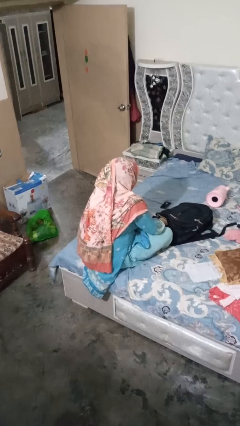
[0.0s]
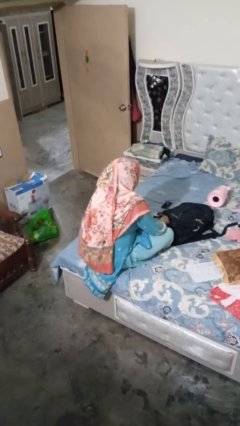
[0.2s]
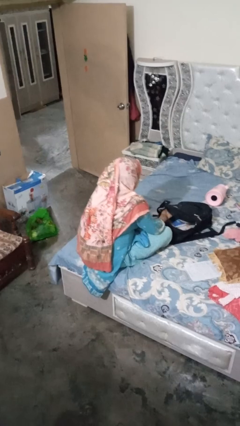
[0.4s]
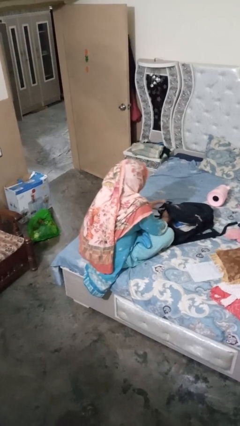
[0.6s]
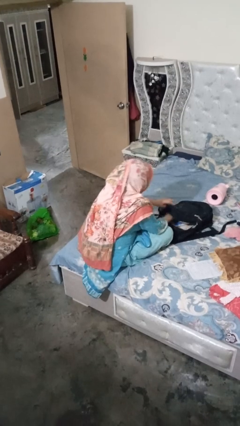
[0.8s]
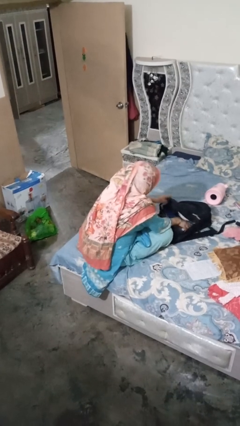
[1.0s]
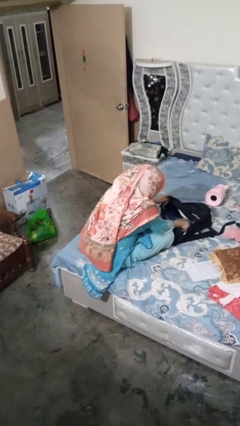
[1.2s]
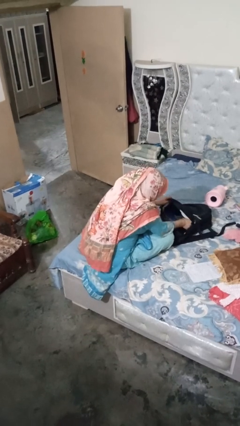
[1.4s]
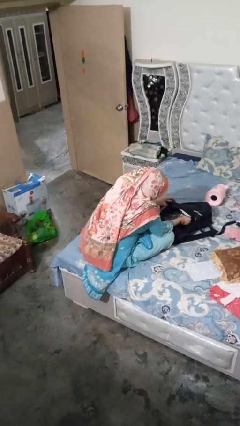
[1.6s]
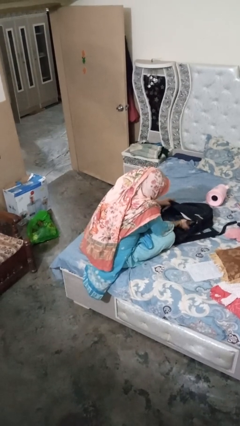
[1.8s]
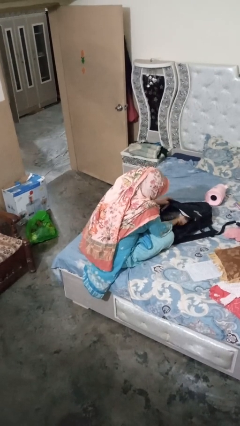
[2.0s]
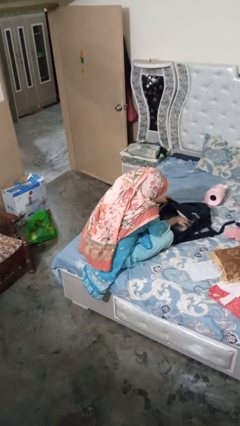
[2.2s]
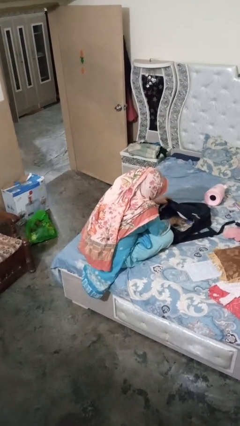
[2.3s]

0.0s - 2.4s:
person searches in bag

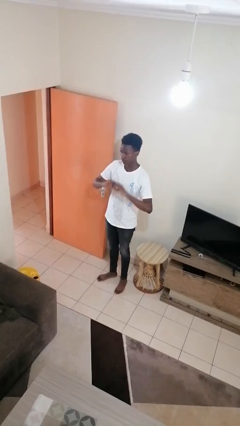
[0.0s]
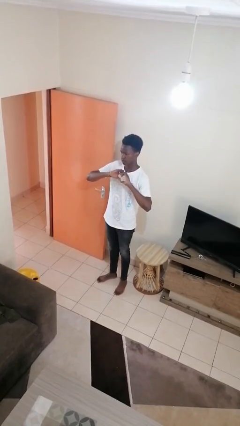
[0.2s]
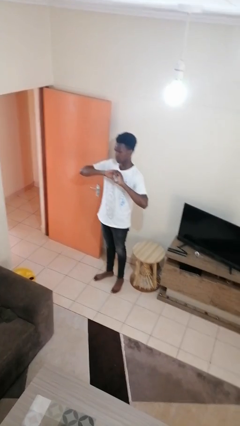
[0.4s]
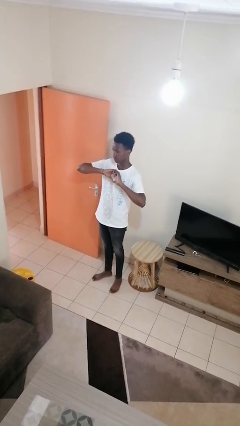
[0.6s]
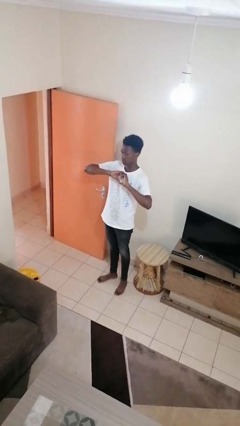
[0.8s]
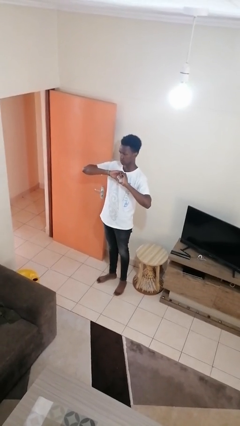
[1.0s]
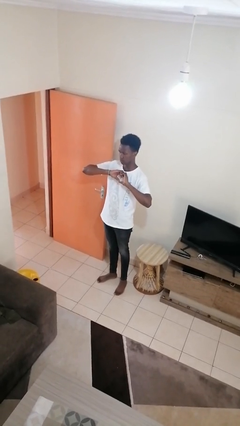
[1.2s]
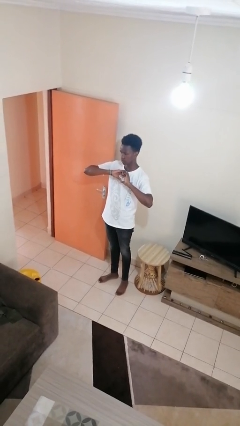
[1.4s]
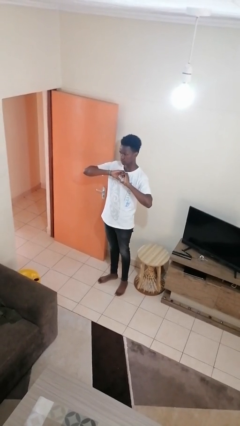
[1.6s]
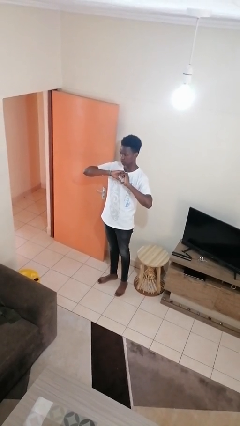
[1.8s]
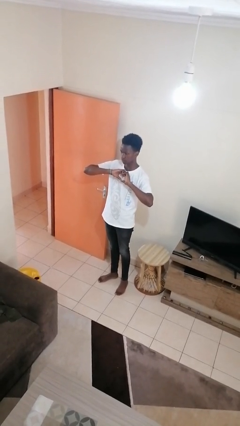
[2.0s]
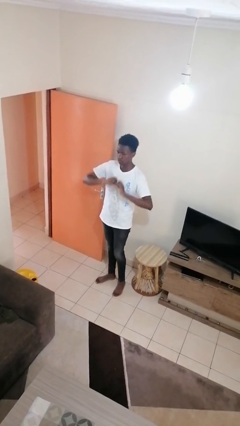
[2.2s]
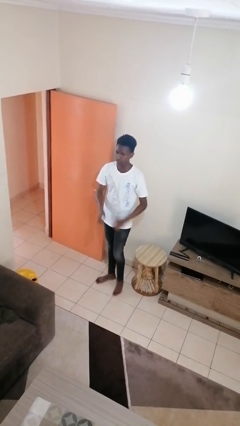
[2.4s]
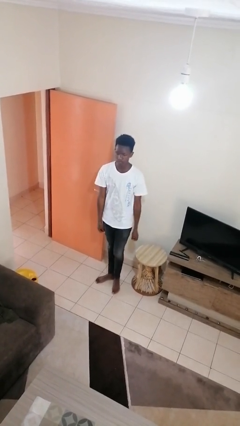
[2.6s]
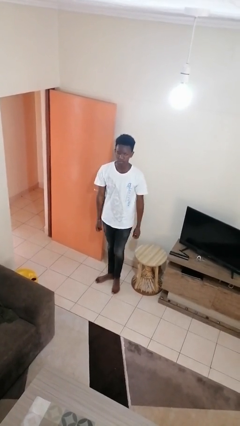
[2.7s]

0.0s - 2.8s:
person gestures heart

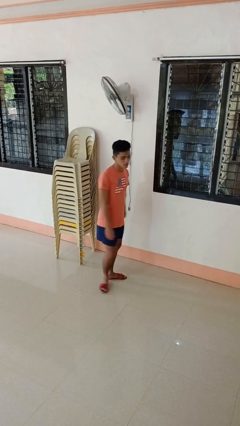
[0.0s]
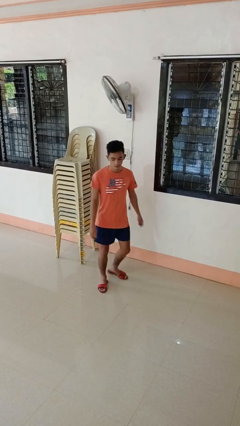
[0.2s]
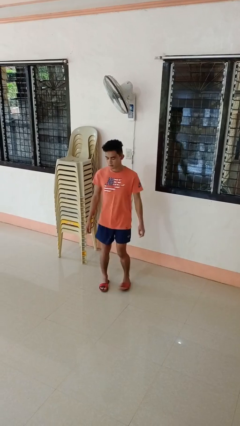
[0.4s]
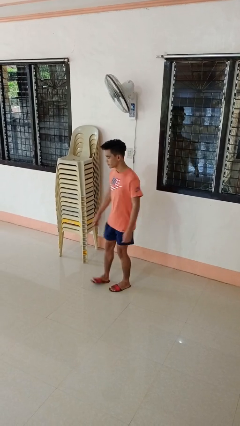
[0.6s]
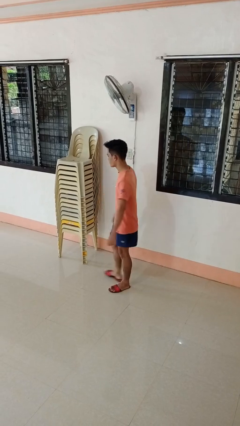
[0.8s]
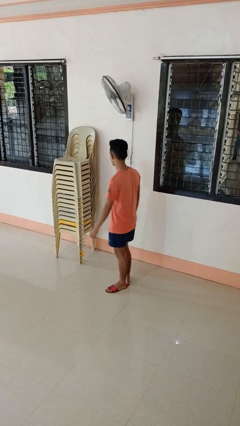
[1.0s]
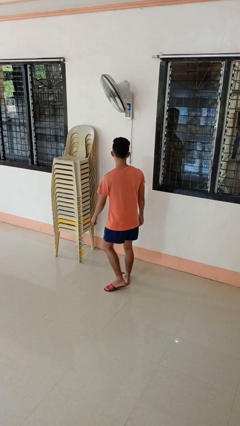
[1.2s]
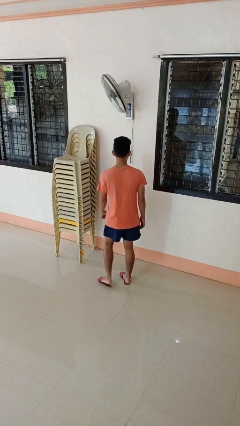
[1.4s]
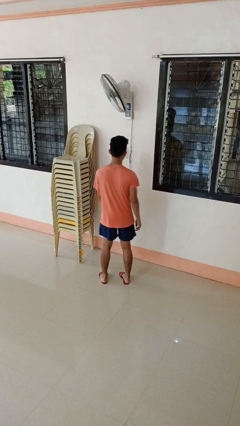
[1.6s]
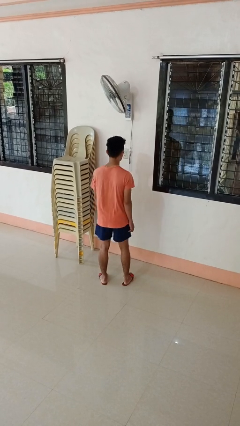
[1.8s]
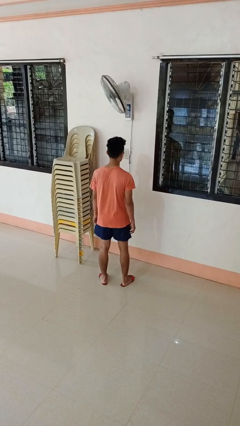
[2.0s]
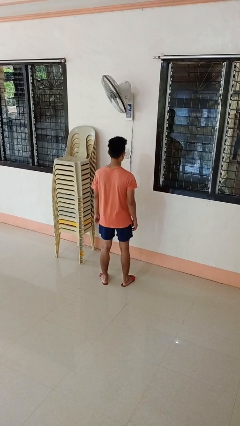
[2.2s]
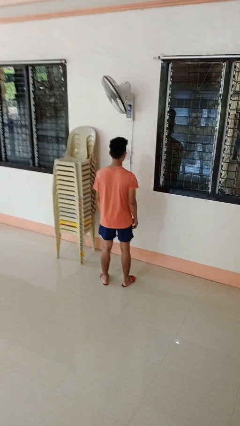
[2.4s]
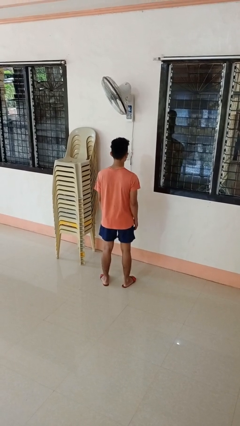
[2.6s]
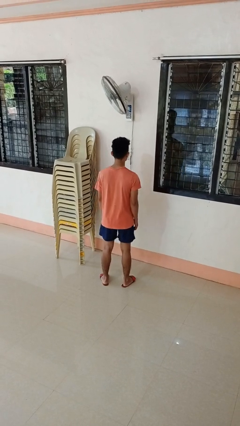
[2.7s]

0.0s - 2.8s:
person twirls

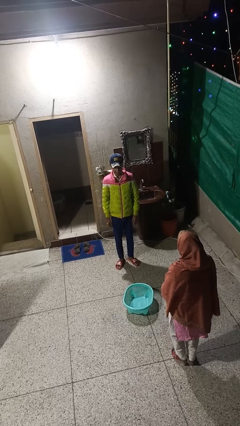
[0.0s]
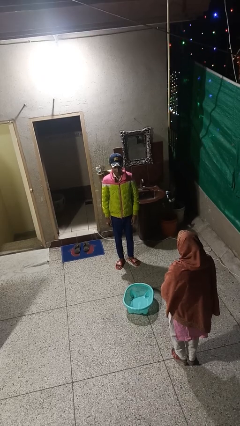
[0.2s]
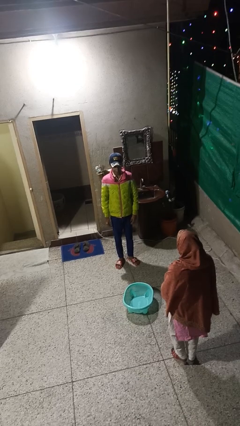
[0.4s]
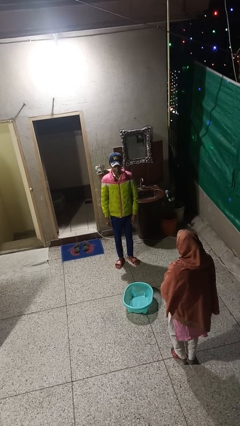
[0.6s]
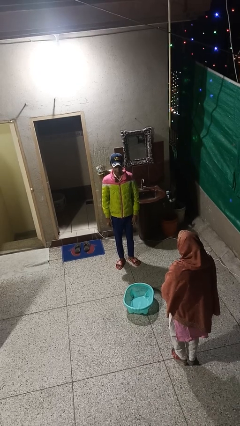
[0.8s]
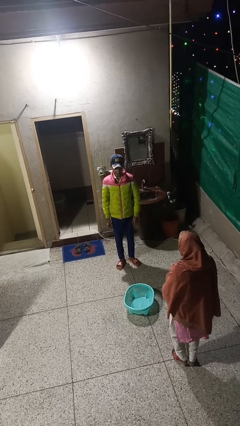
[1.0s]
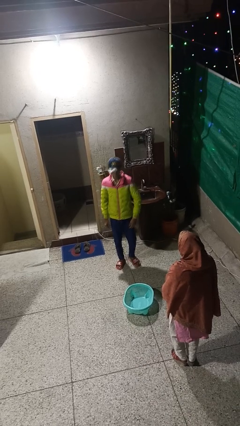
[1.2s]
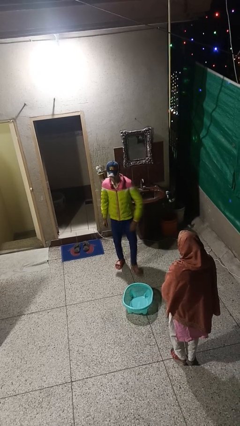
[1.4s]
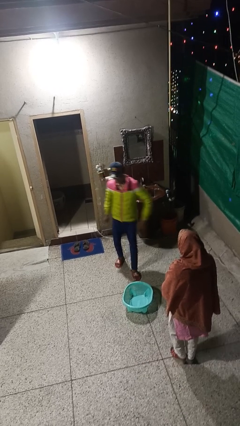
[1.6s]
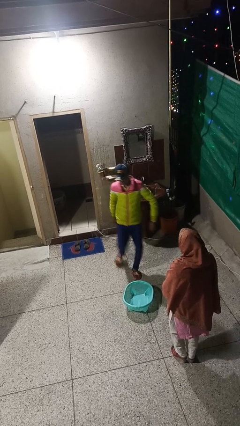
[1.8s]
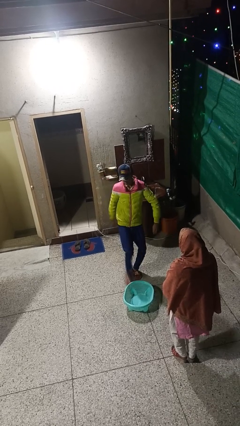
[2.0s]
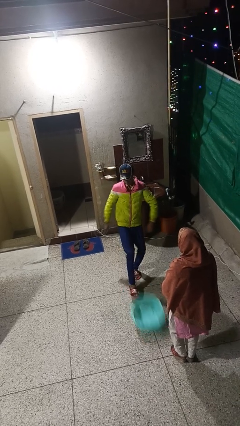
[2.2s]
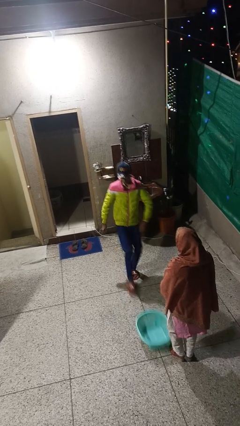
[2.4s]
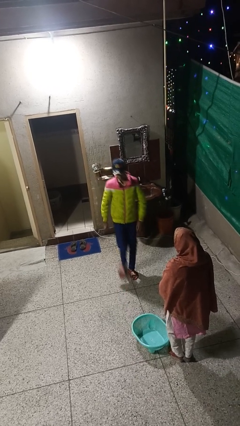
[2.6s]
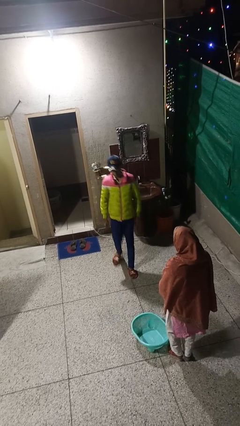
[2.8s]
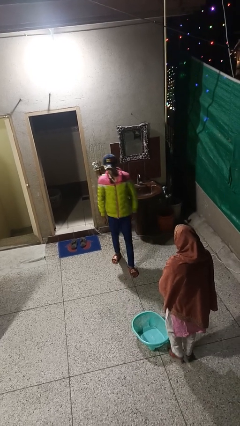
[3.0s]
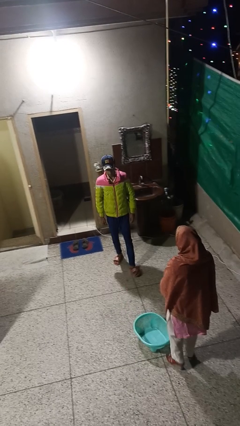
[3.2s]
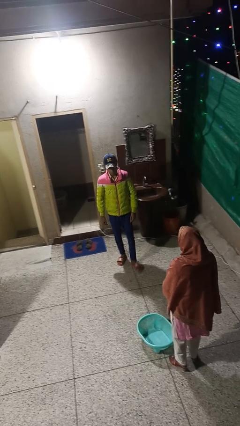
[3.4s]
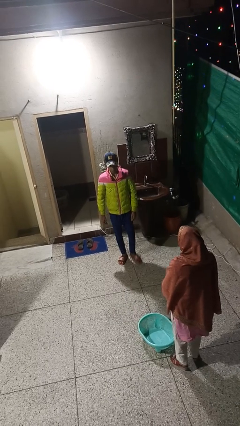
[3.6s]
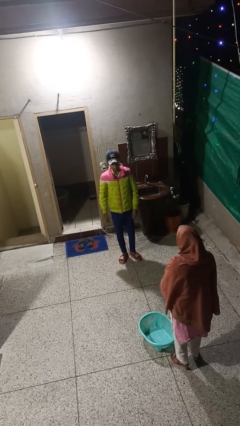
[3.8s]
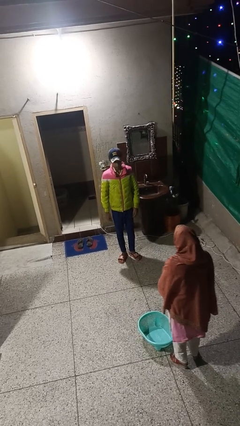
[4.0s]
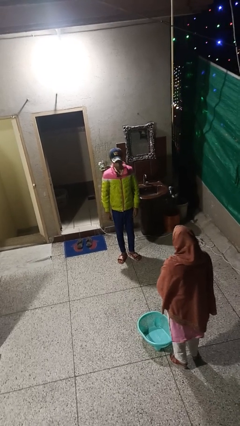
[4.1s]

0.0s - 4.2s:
person kicks object to person

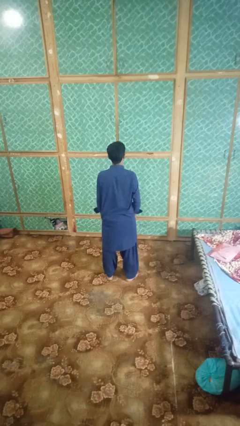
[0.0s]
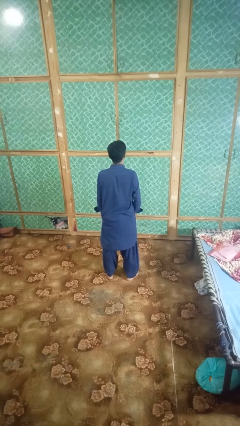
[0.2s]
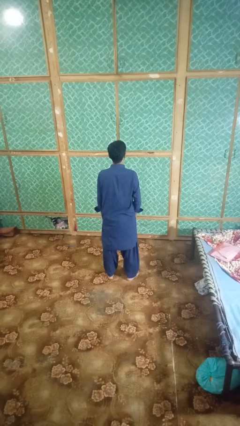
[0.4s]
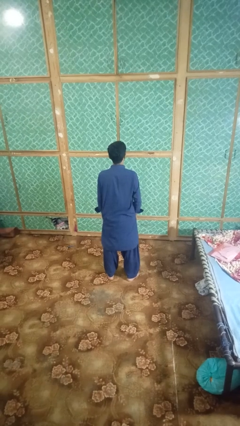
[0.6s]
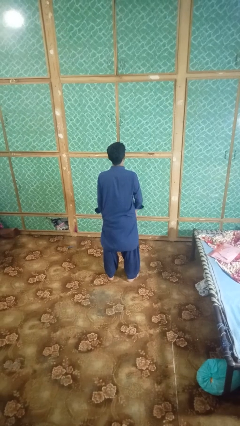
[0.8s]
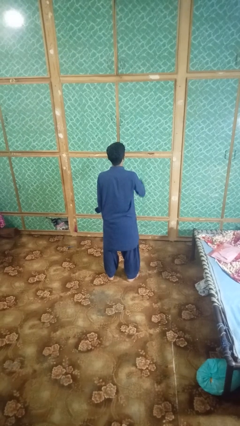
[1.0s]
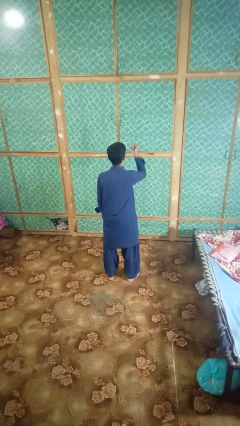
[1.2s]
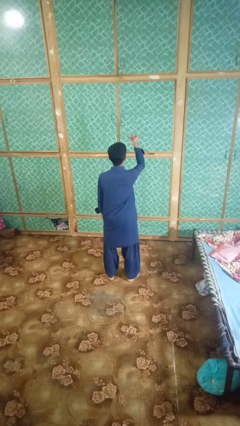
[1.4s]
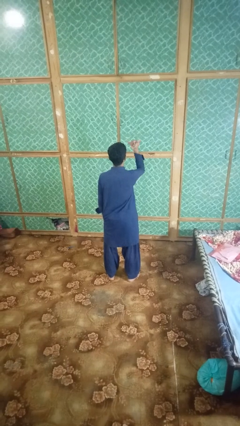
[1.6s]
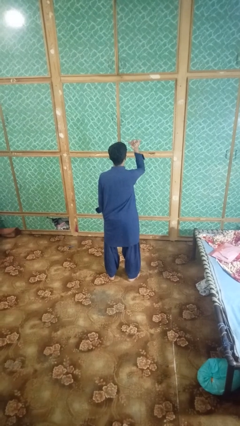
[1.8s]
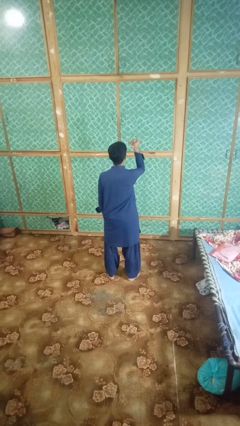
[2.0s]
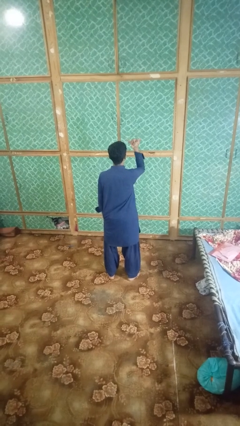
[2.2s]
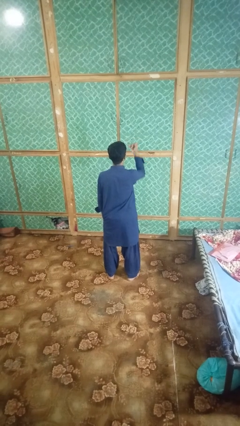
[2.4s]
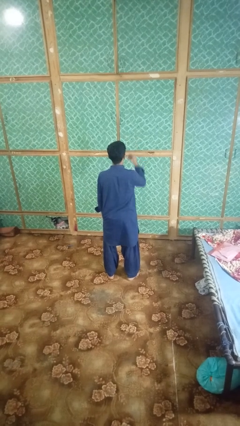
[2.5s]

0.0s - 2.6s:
person gestures hang loose

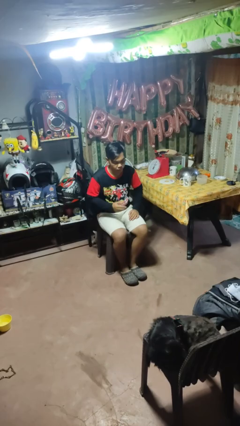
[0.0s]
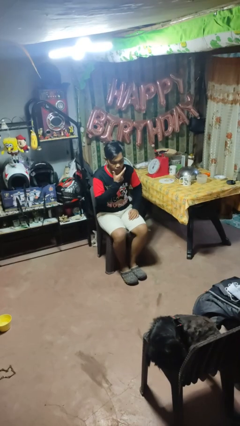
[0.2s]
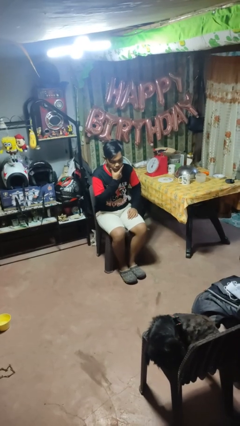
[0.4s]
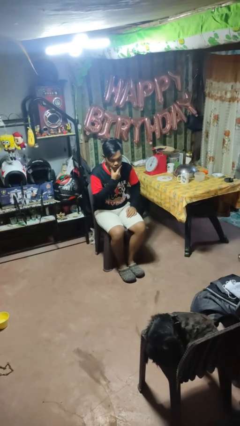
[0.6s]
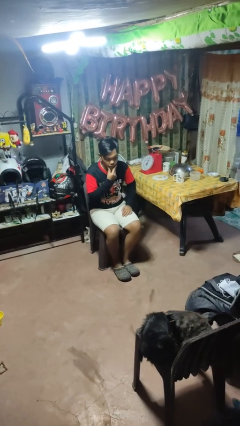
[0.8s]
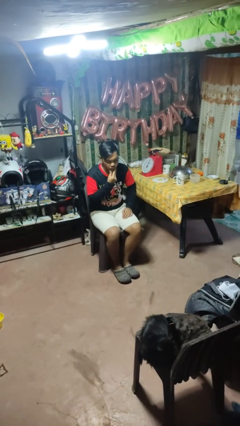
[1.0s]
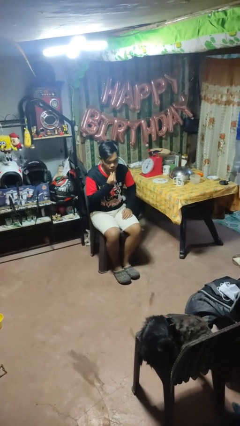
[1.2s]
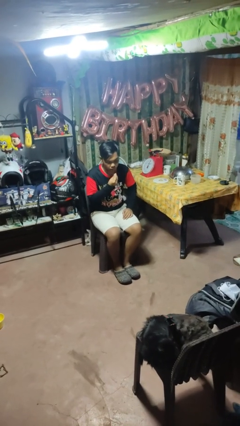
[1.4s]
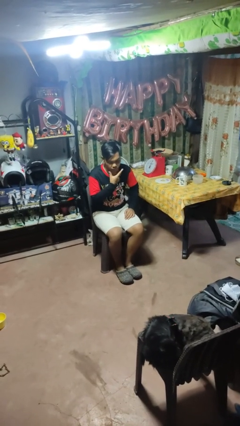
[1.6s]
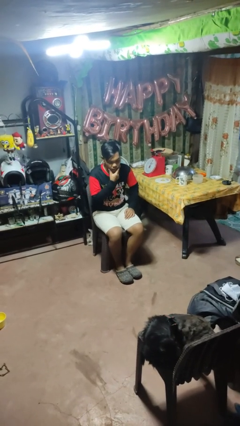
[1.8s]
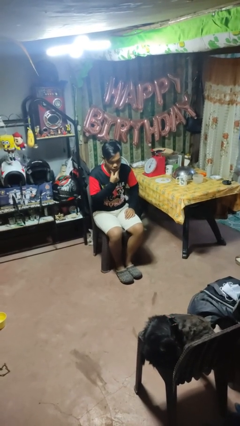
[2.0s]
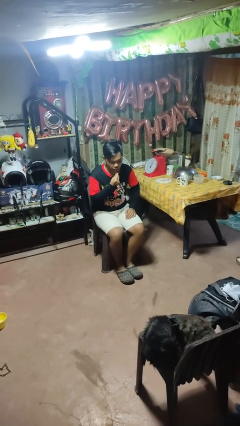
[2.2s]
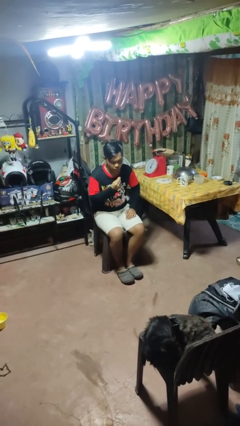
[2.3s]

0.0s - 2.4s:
person strokes chin

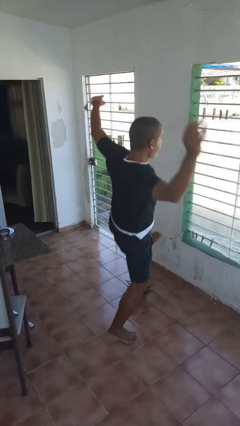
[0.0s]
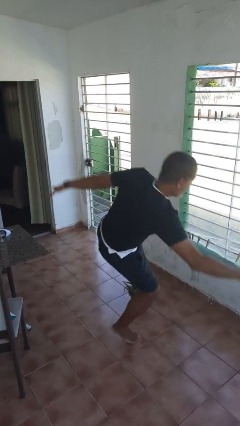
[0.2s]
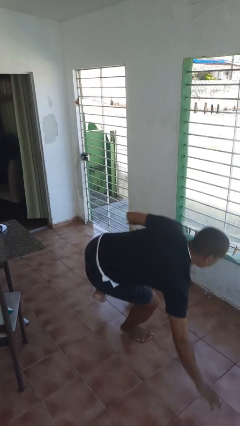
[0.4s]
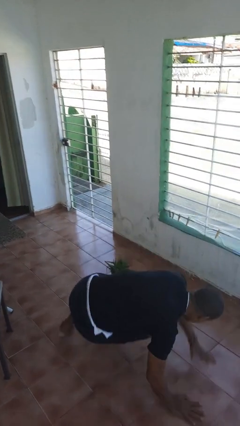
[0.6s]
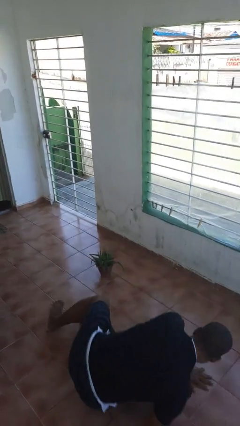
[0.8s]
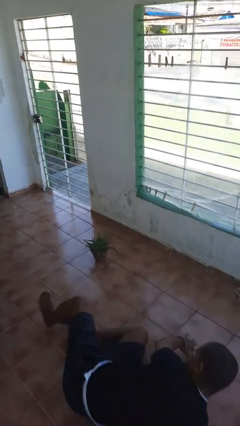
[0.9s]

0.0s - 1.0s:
person trips on object on floor
